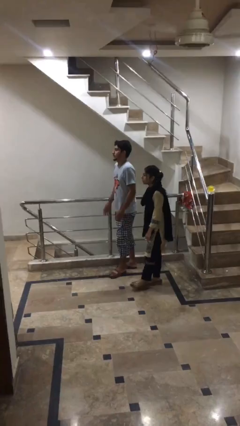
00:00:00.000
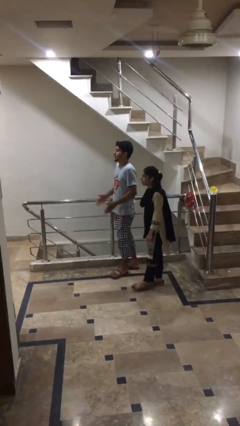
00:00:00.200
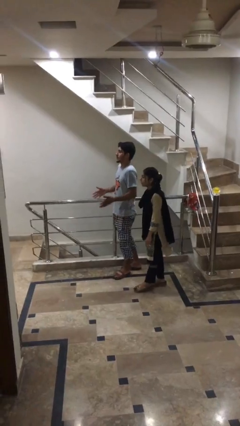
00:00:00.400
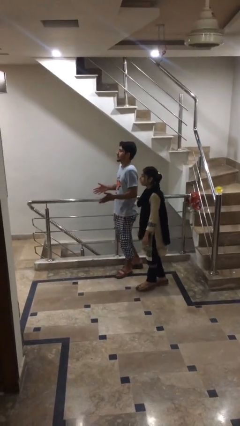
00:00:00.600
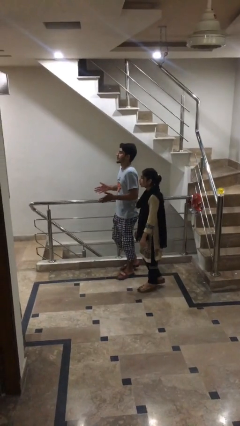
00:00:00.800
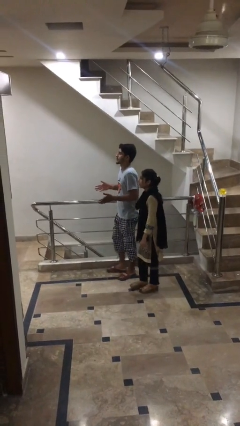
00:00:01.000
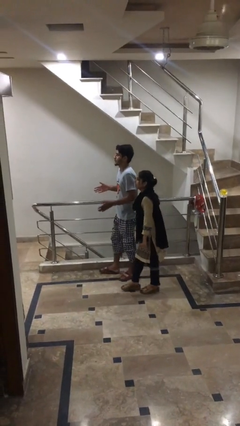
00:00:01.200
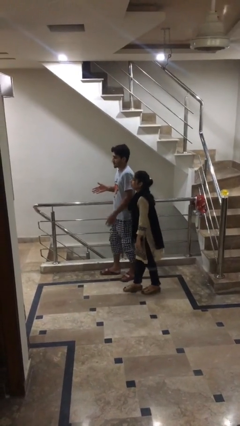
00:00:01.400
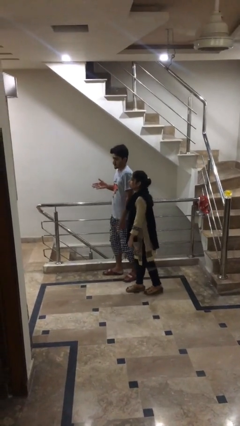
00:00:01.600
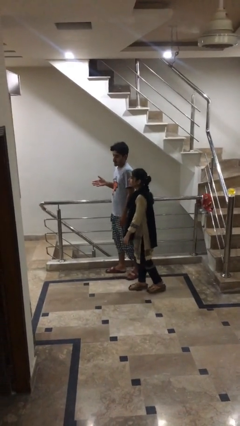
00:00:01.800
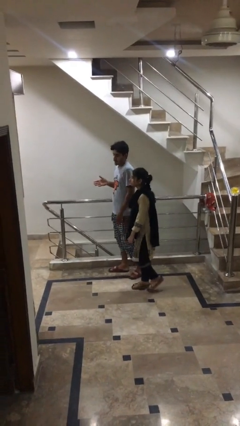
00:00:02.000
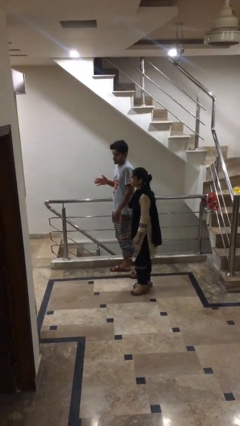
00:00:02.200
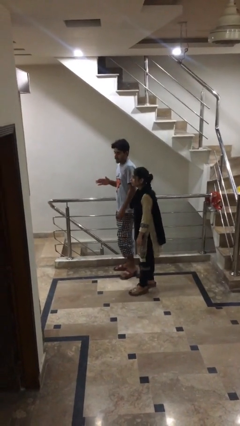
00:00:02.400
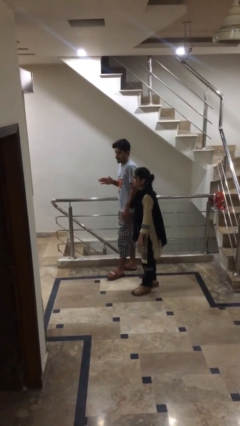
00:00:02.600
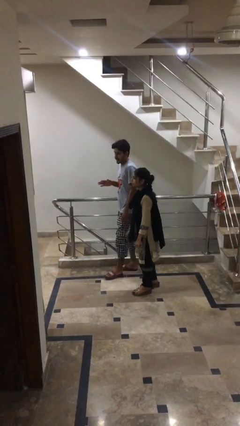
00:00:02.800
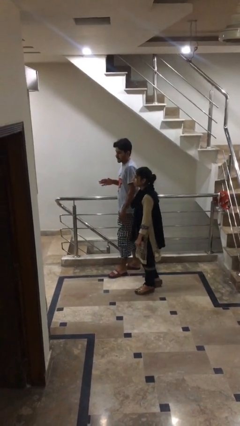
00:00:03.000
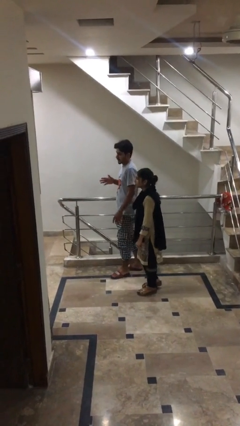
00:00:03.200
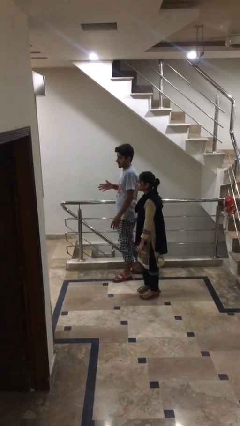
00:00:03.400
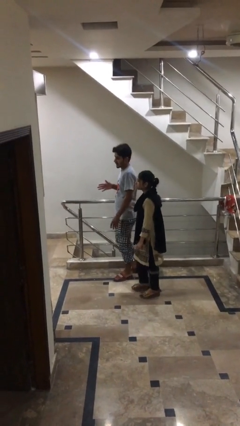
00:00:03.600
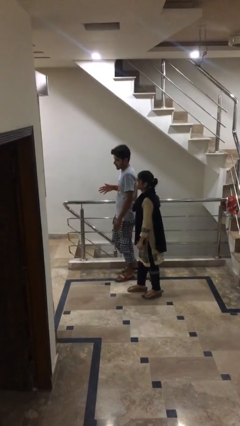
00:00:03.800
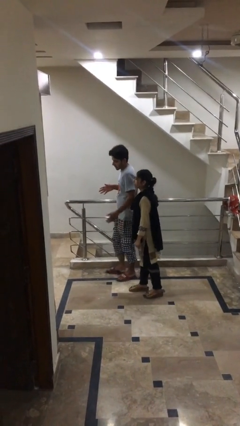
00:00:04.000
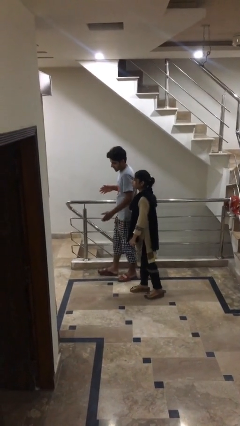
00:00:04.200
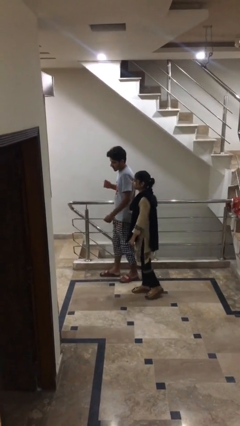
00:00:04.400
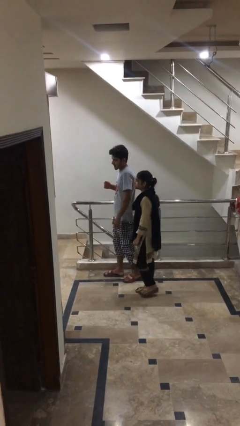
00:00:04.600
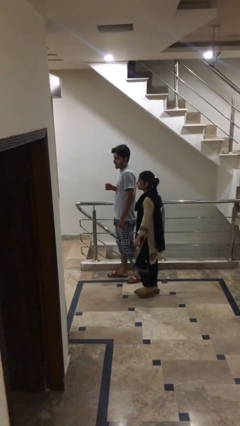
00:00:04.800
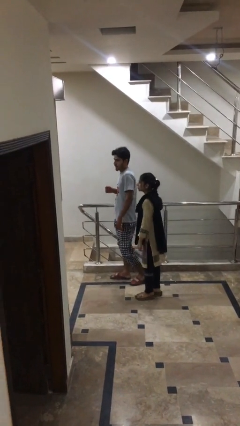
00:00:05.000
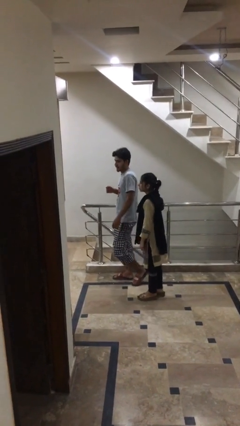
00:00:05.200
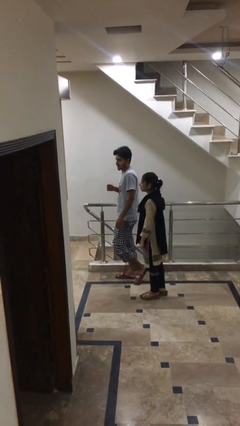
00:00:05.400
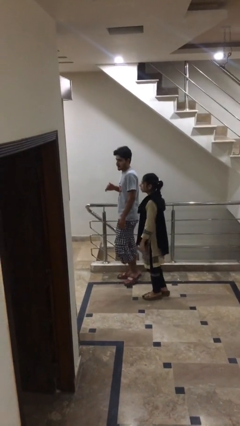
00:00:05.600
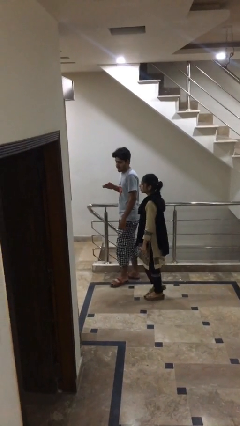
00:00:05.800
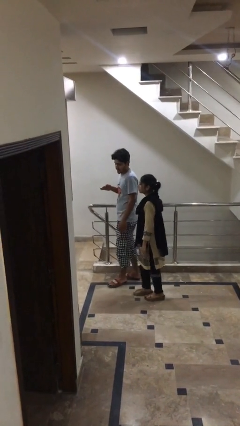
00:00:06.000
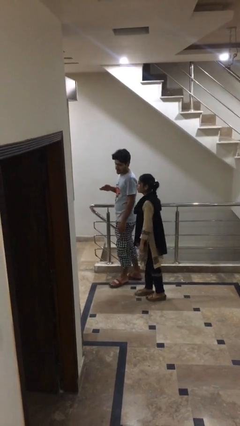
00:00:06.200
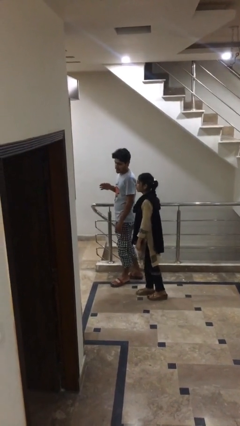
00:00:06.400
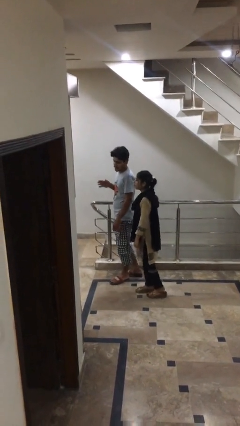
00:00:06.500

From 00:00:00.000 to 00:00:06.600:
person talks to person

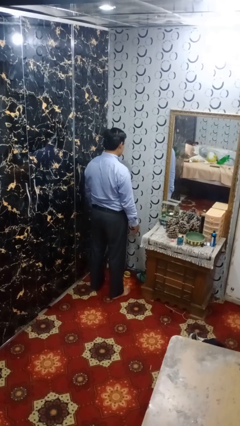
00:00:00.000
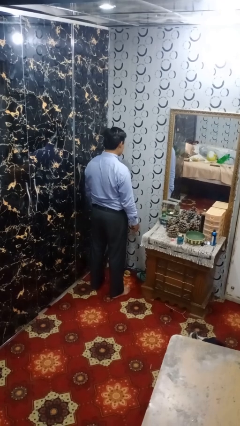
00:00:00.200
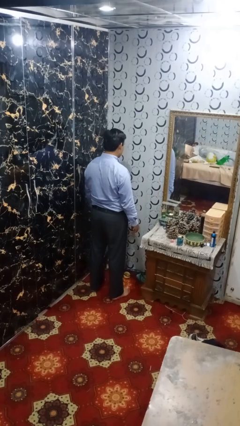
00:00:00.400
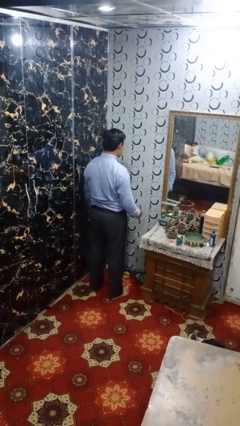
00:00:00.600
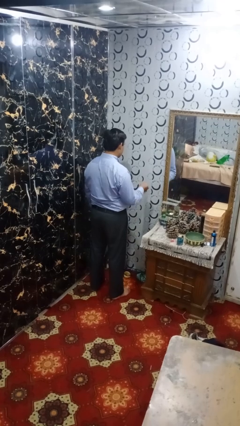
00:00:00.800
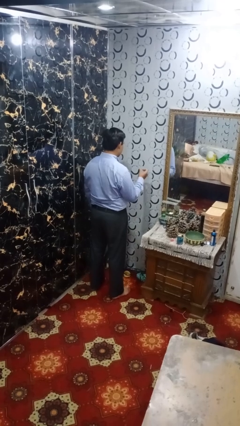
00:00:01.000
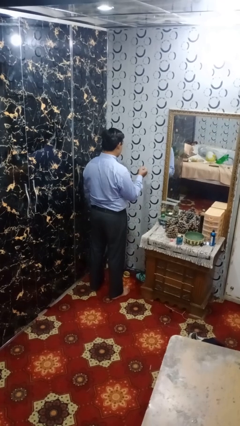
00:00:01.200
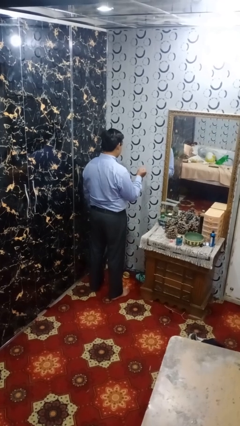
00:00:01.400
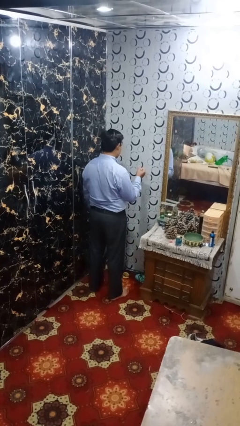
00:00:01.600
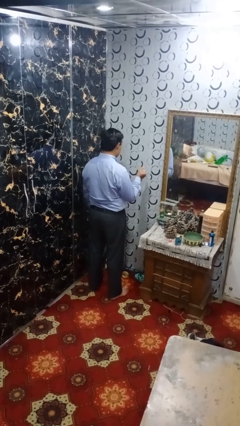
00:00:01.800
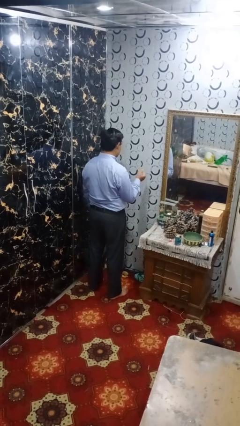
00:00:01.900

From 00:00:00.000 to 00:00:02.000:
person snaps fingers

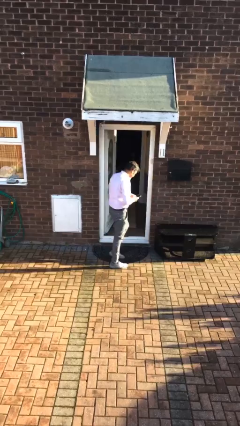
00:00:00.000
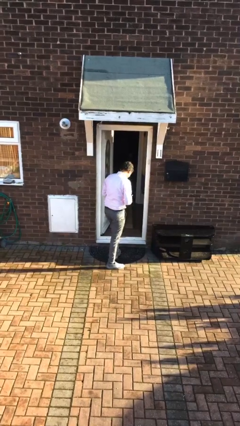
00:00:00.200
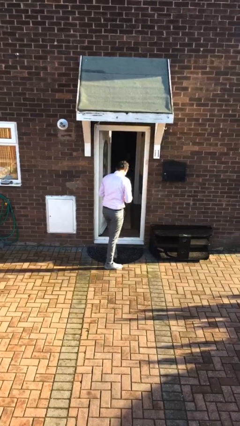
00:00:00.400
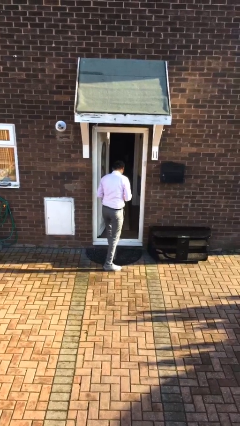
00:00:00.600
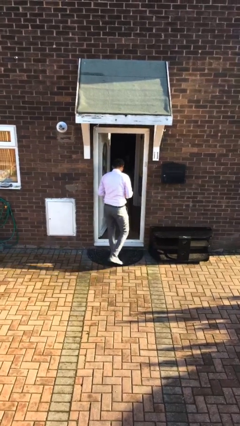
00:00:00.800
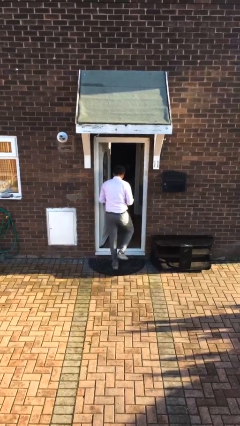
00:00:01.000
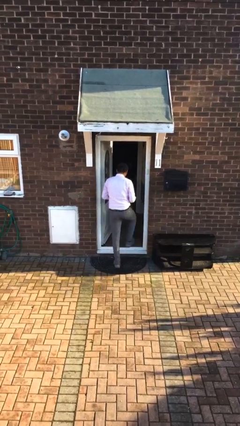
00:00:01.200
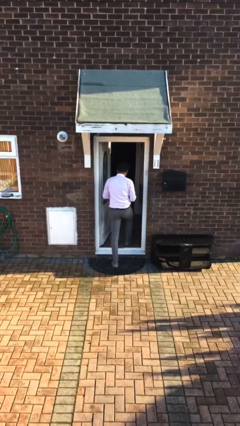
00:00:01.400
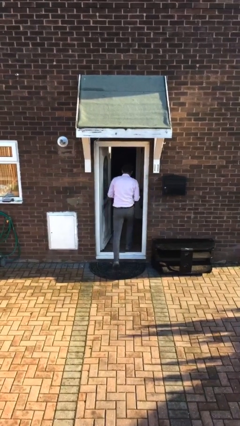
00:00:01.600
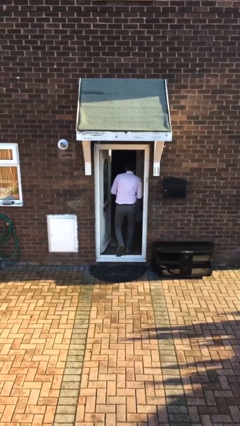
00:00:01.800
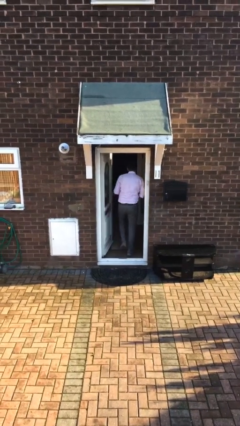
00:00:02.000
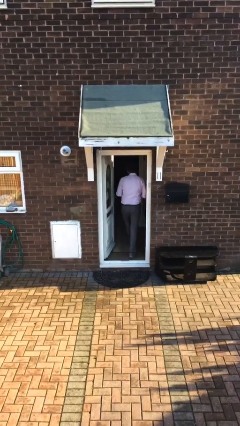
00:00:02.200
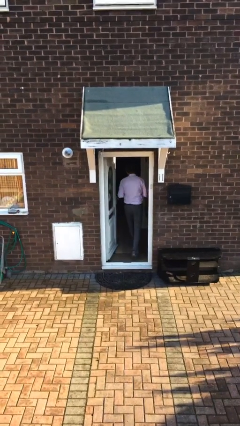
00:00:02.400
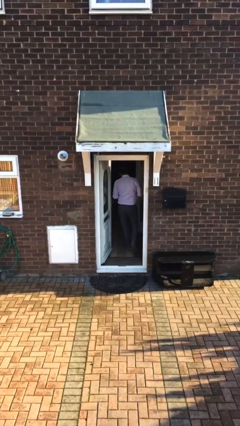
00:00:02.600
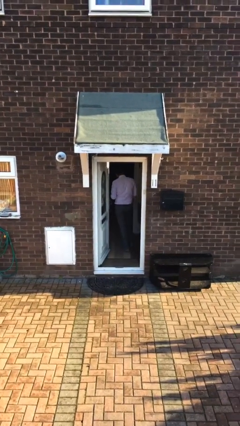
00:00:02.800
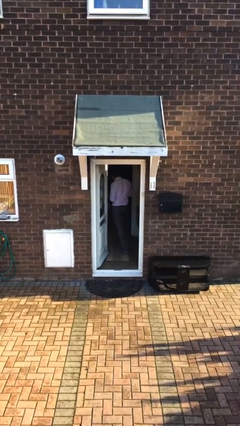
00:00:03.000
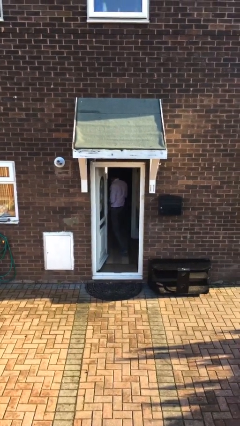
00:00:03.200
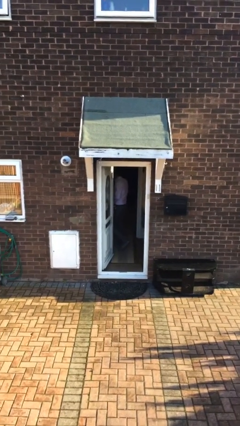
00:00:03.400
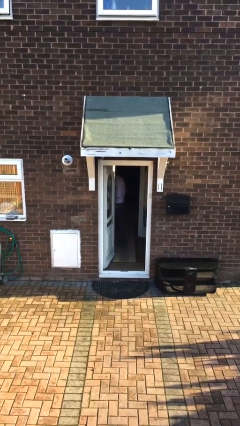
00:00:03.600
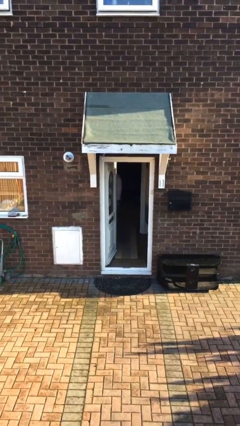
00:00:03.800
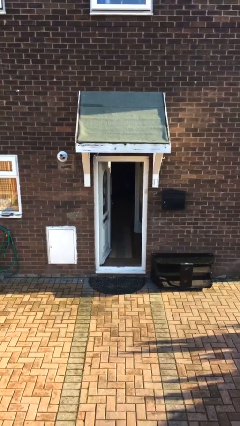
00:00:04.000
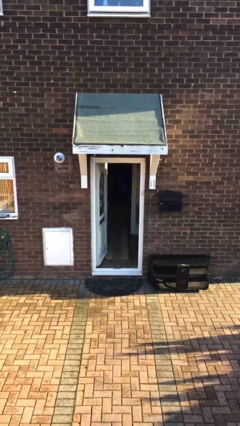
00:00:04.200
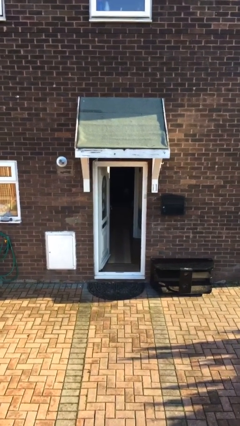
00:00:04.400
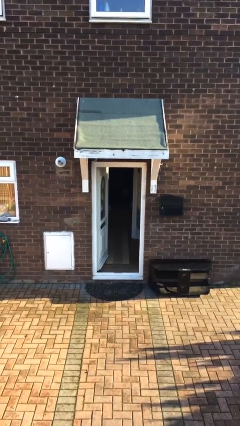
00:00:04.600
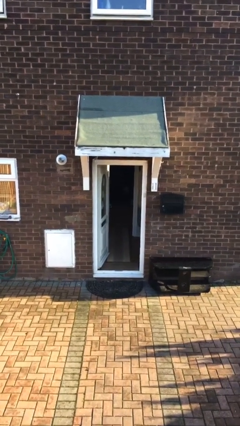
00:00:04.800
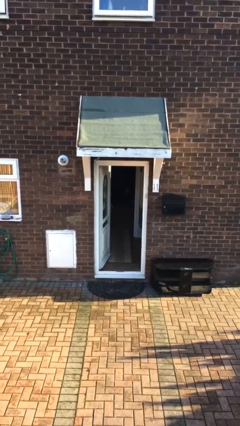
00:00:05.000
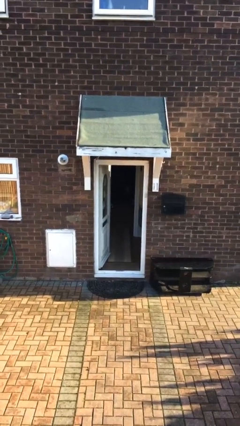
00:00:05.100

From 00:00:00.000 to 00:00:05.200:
person exits scene through structure

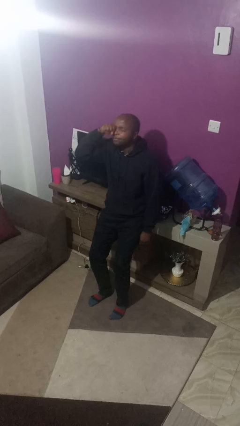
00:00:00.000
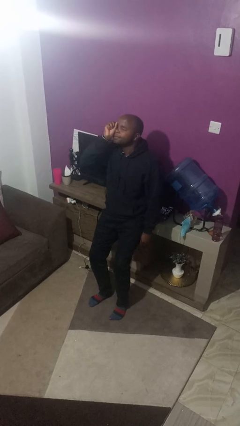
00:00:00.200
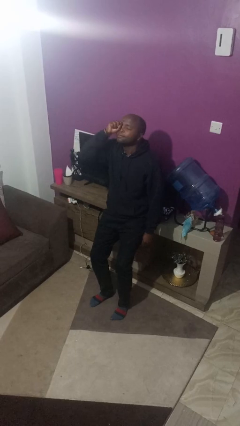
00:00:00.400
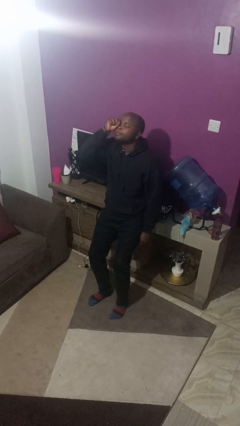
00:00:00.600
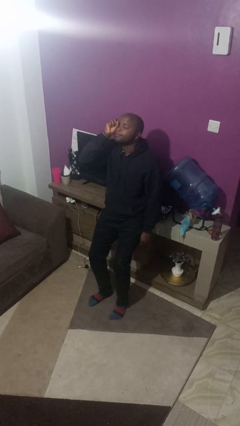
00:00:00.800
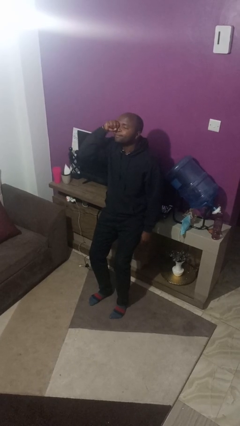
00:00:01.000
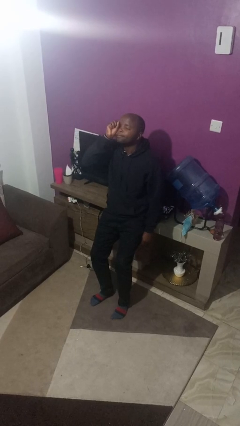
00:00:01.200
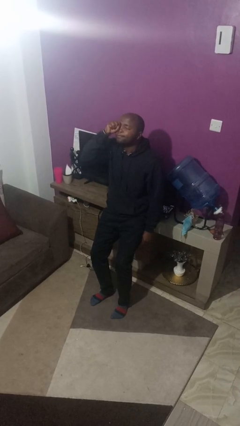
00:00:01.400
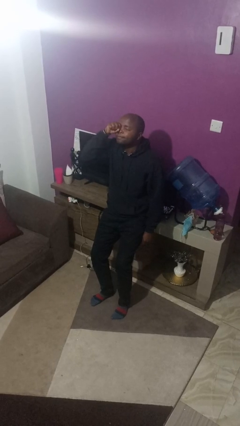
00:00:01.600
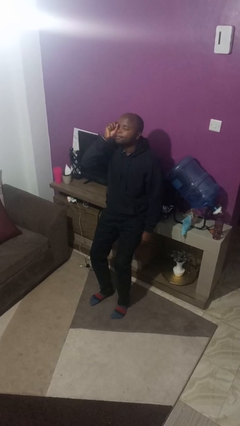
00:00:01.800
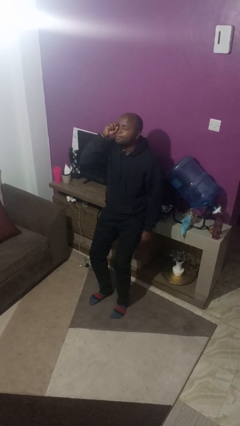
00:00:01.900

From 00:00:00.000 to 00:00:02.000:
person rubs eyes

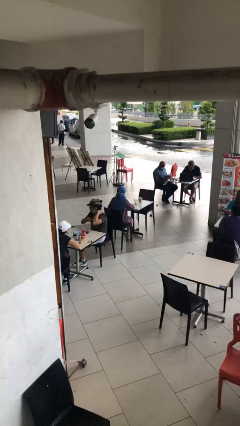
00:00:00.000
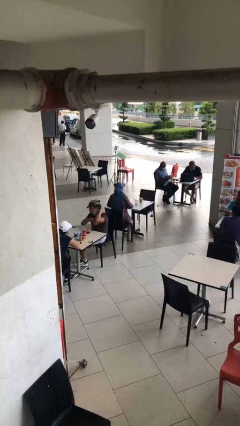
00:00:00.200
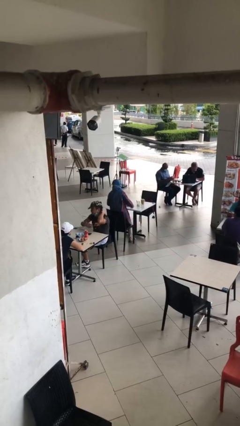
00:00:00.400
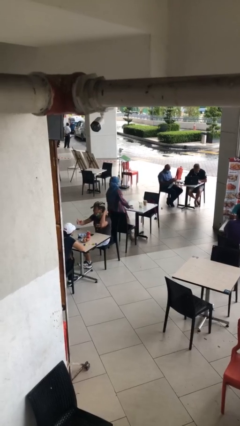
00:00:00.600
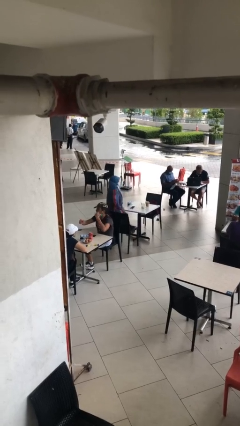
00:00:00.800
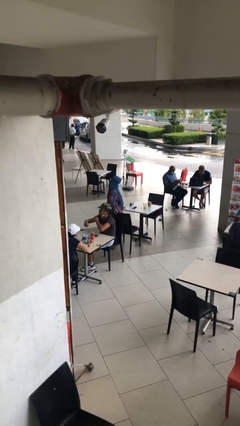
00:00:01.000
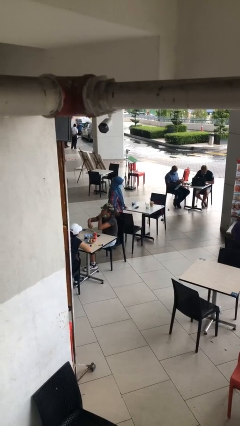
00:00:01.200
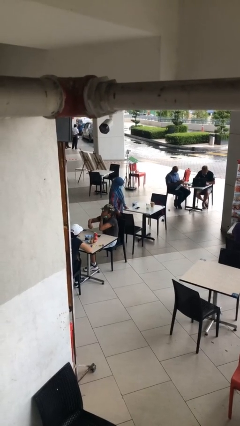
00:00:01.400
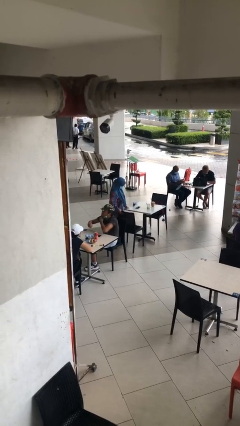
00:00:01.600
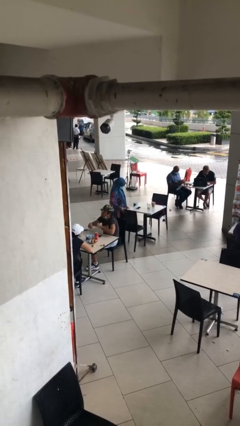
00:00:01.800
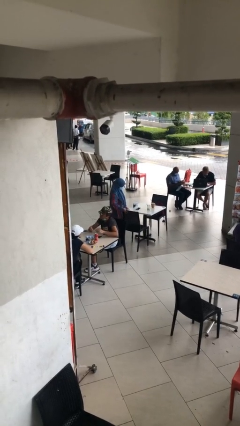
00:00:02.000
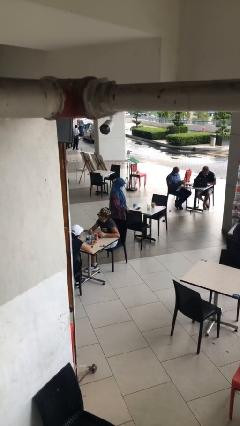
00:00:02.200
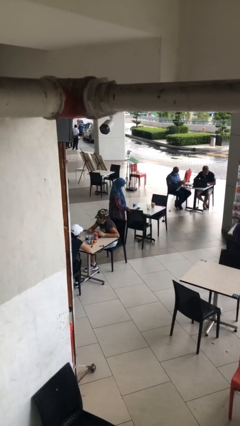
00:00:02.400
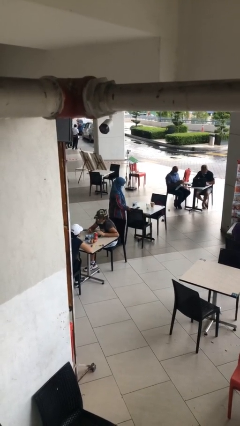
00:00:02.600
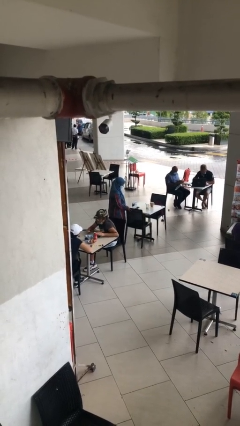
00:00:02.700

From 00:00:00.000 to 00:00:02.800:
person stands up
